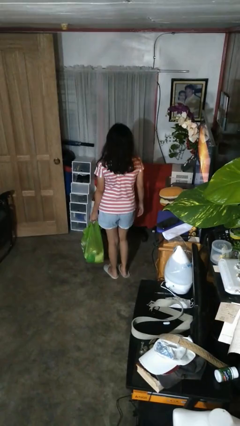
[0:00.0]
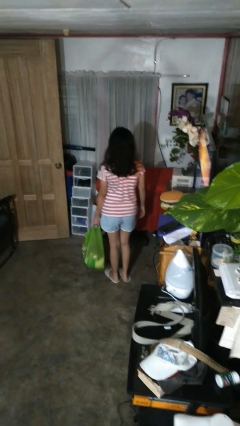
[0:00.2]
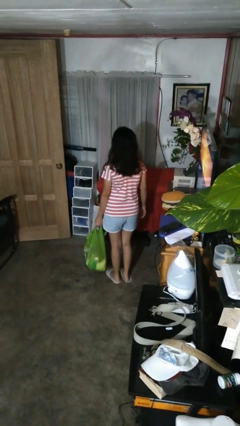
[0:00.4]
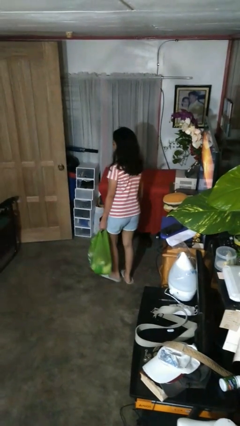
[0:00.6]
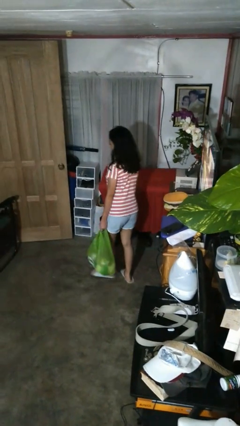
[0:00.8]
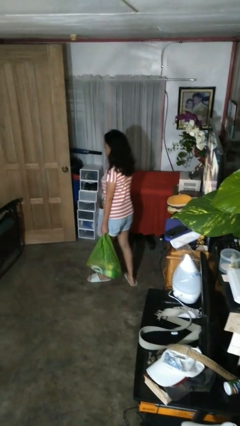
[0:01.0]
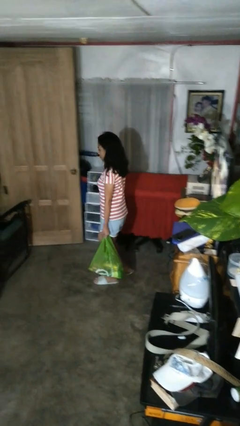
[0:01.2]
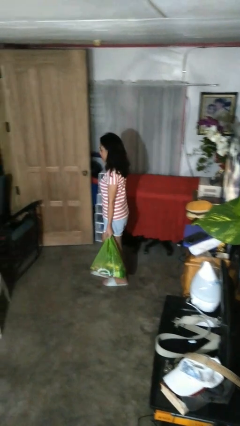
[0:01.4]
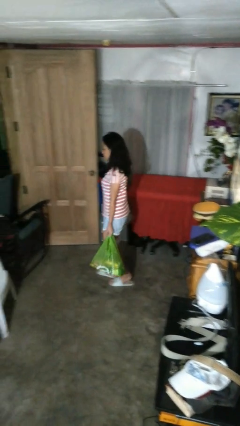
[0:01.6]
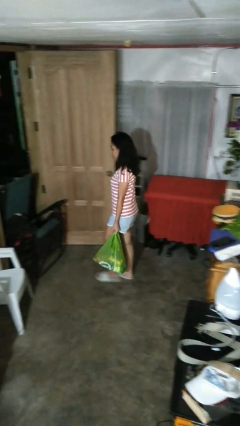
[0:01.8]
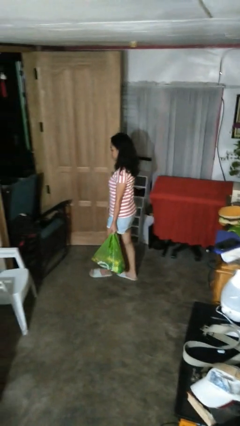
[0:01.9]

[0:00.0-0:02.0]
person carries groceries

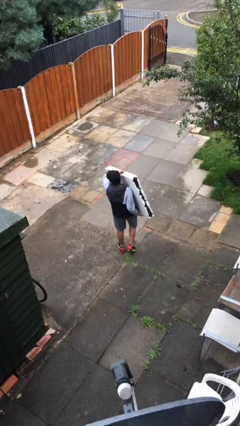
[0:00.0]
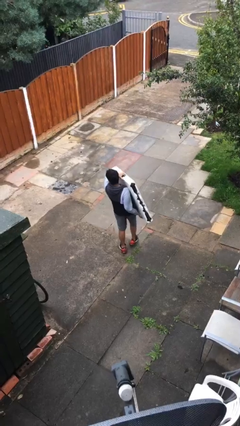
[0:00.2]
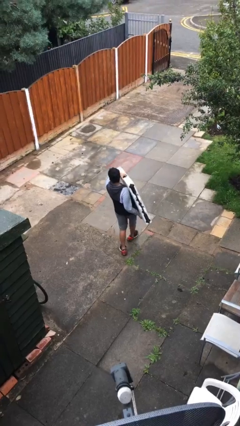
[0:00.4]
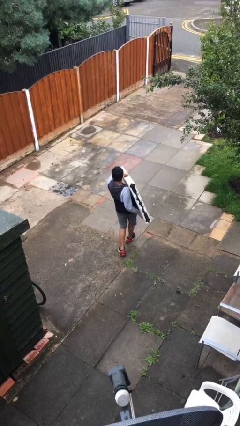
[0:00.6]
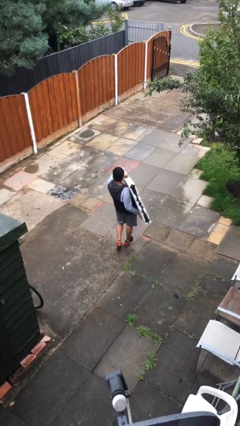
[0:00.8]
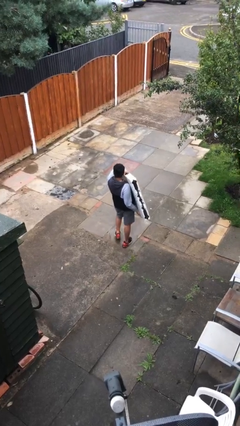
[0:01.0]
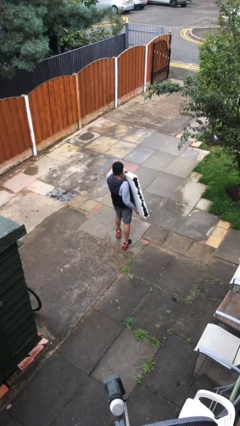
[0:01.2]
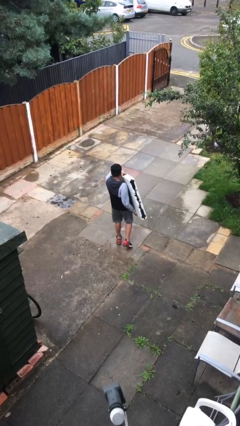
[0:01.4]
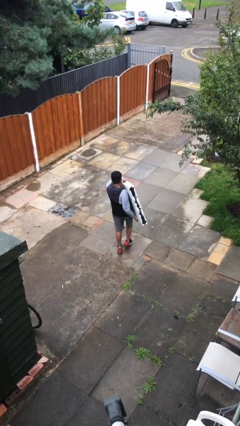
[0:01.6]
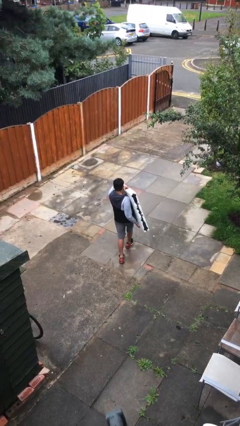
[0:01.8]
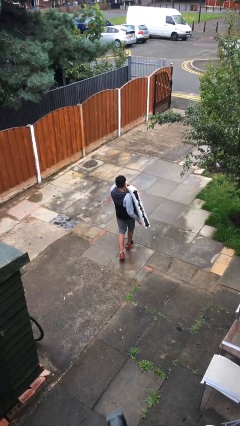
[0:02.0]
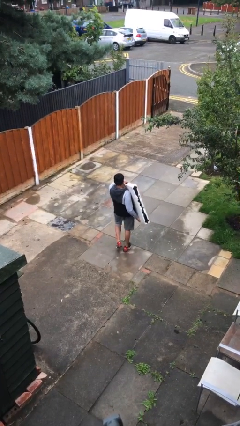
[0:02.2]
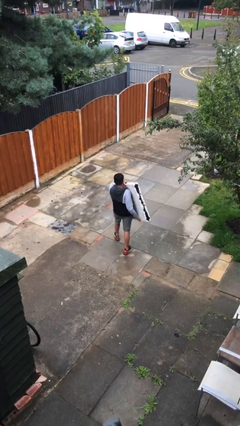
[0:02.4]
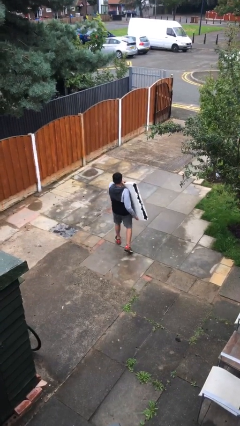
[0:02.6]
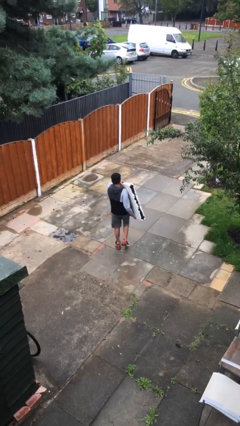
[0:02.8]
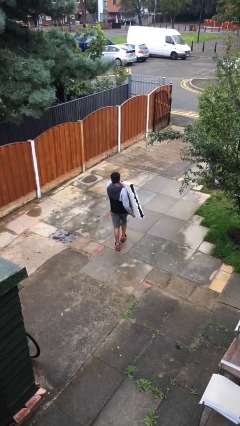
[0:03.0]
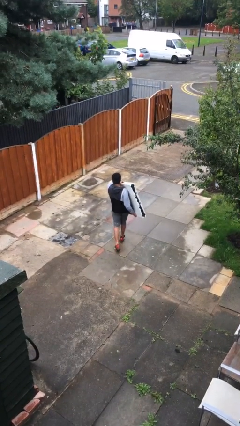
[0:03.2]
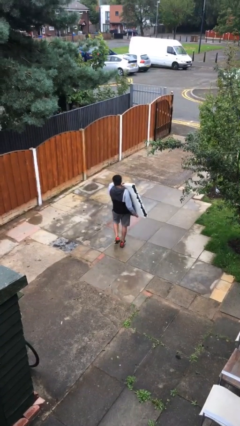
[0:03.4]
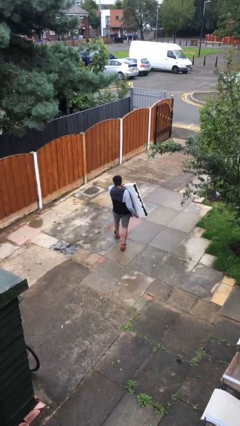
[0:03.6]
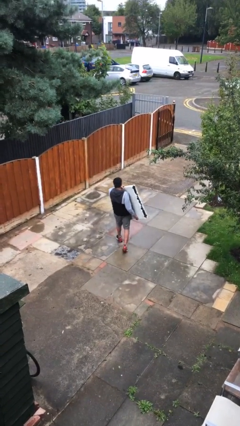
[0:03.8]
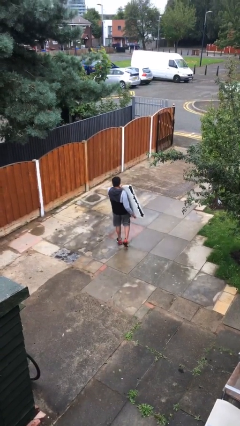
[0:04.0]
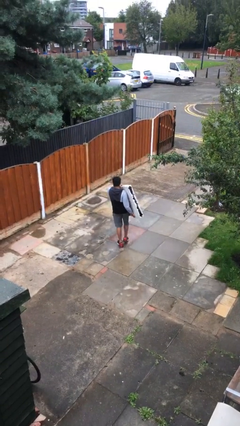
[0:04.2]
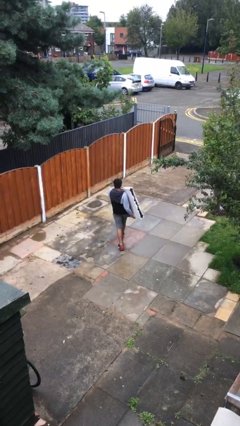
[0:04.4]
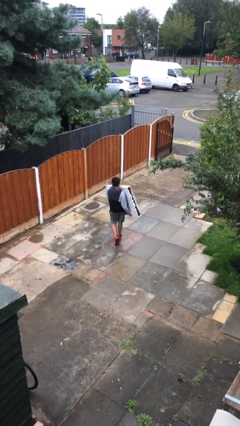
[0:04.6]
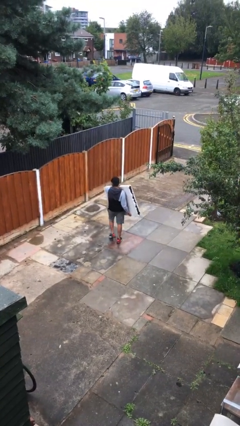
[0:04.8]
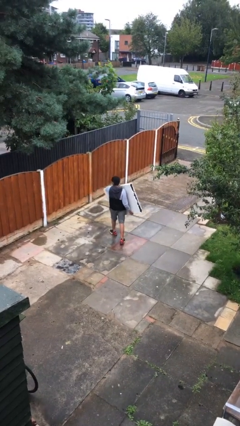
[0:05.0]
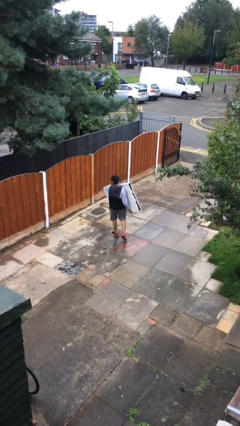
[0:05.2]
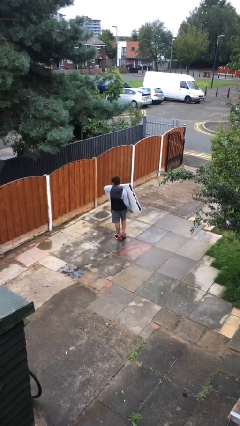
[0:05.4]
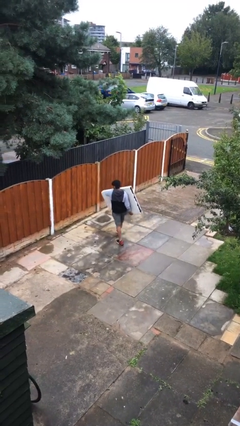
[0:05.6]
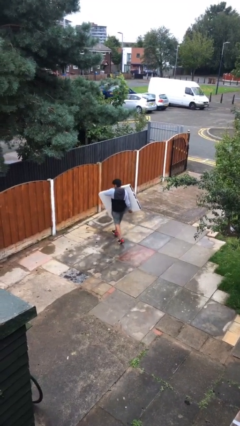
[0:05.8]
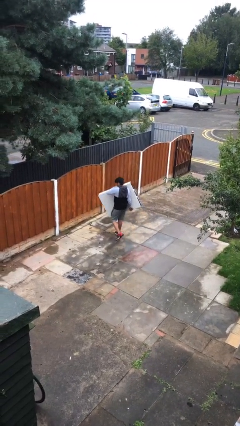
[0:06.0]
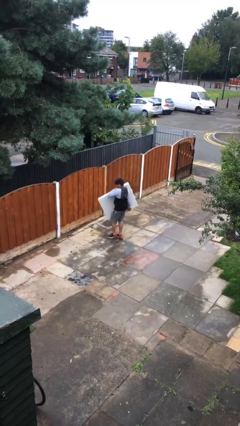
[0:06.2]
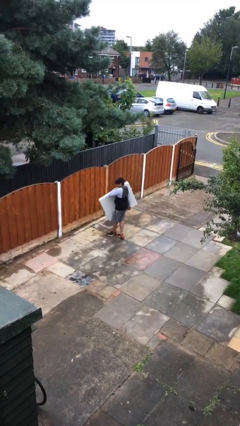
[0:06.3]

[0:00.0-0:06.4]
person carries heavy object

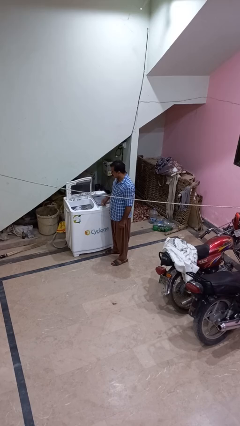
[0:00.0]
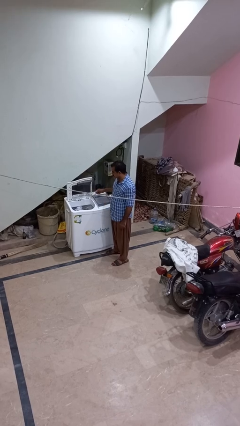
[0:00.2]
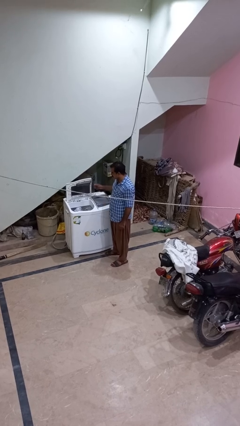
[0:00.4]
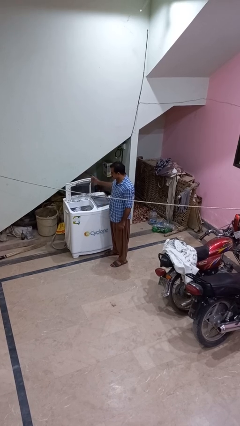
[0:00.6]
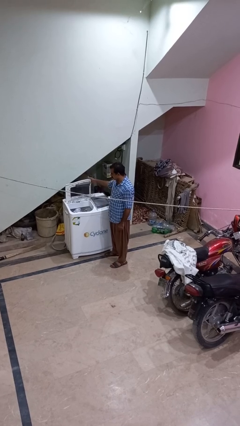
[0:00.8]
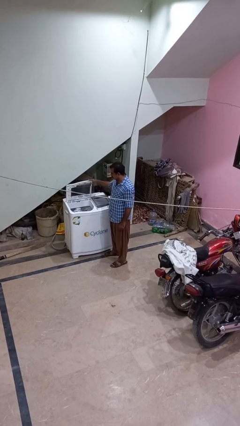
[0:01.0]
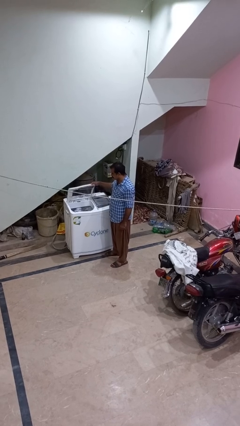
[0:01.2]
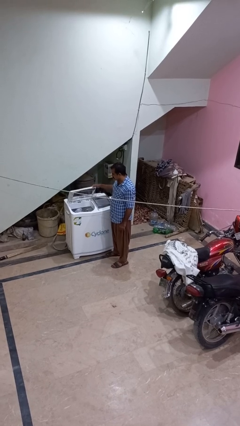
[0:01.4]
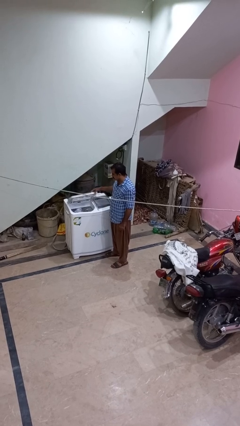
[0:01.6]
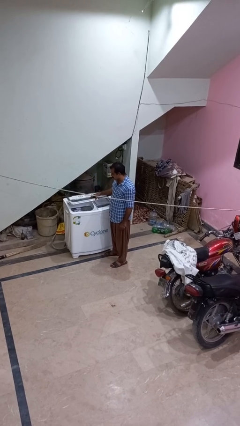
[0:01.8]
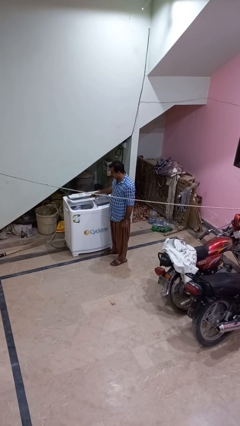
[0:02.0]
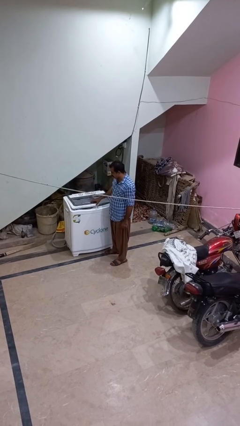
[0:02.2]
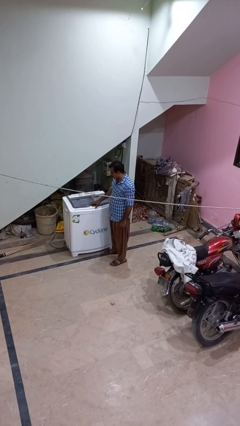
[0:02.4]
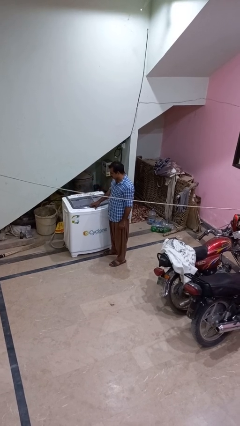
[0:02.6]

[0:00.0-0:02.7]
person closes clothes washer

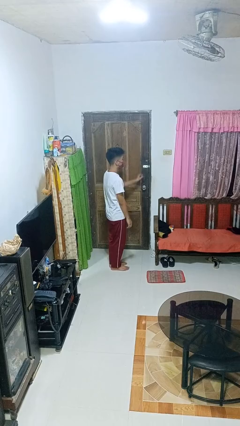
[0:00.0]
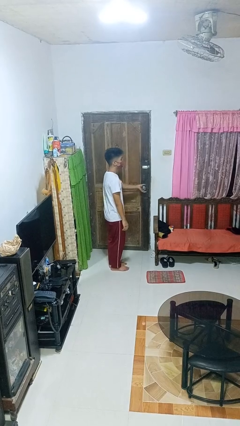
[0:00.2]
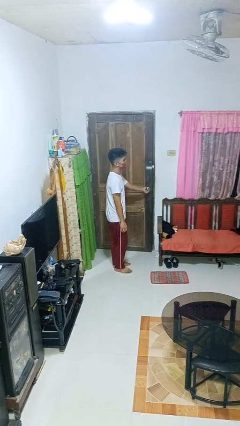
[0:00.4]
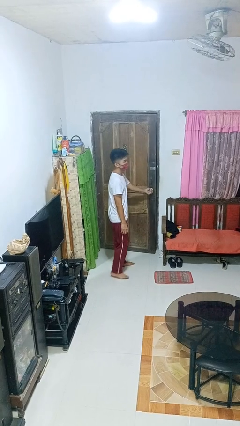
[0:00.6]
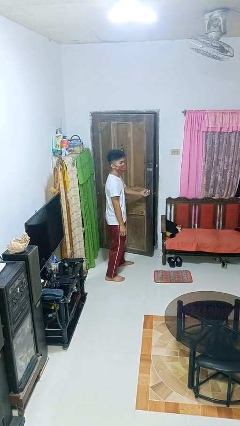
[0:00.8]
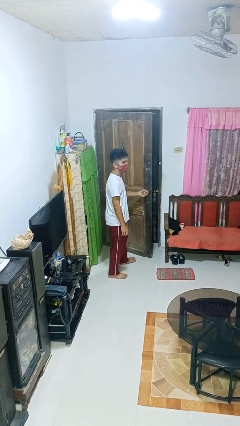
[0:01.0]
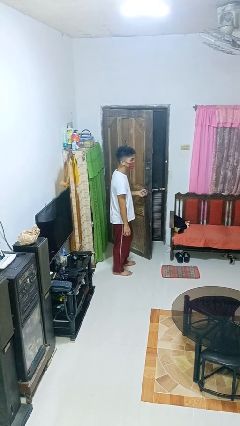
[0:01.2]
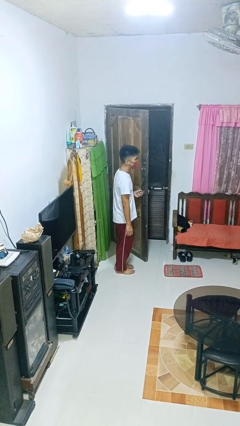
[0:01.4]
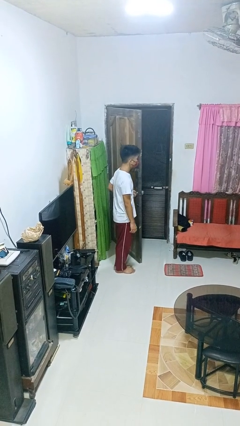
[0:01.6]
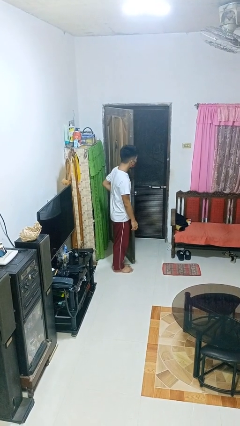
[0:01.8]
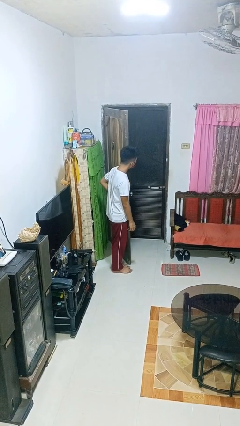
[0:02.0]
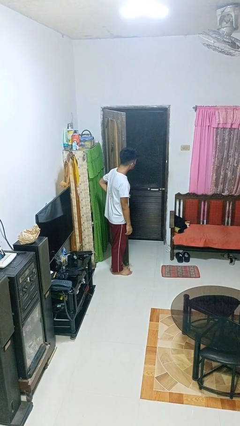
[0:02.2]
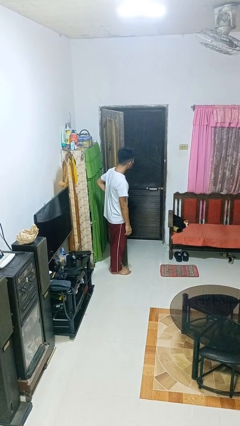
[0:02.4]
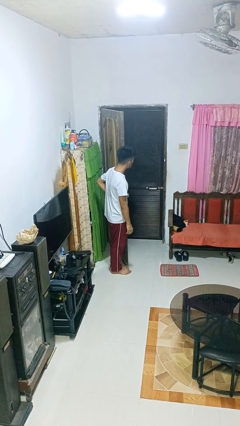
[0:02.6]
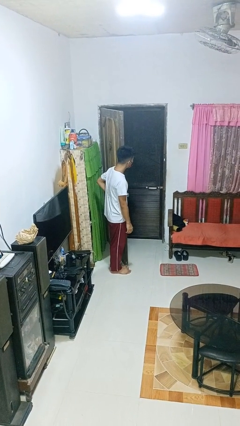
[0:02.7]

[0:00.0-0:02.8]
person opens facility door

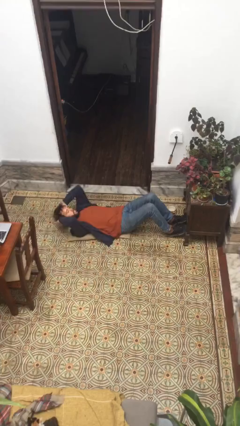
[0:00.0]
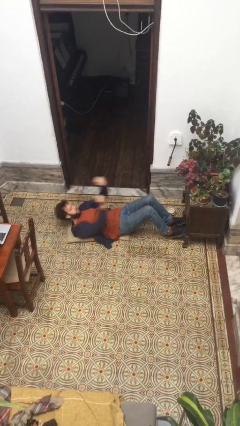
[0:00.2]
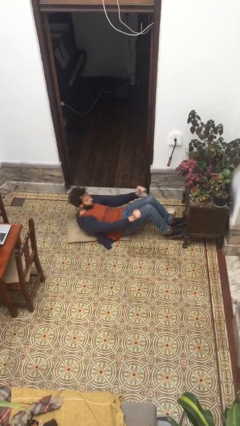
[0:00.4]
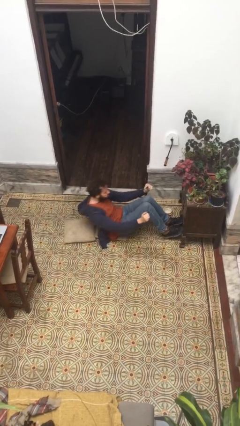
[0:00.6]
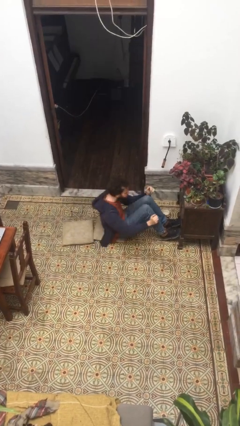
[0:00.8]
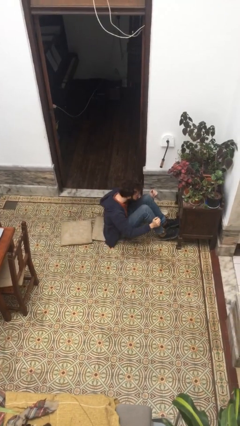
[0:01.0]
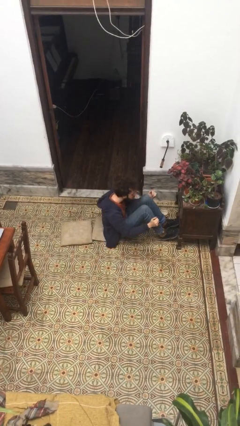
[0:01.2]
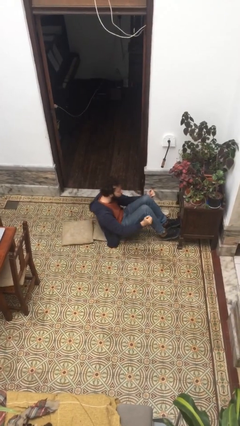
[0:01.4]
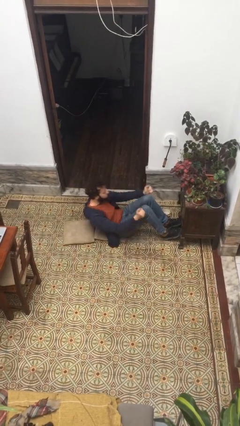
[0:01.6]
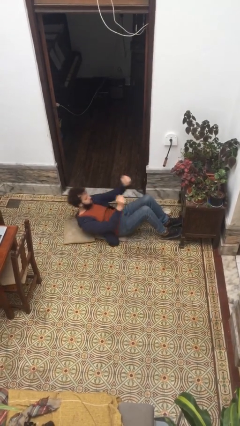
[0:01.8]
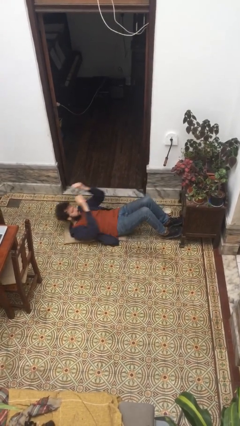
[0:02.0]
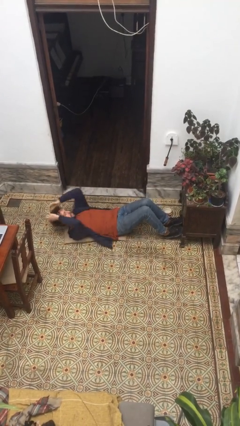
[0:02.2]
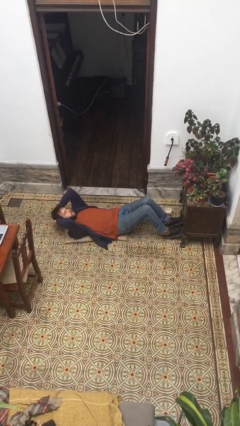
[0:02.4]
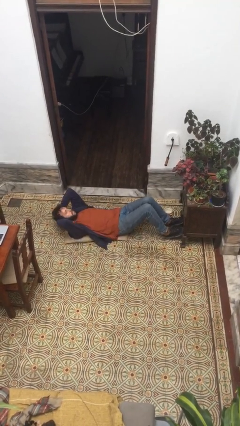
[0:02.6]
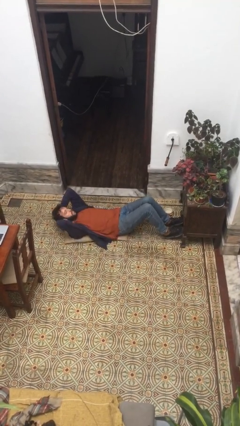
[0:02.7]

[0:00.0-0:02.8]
person exercises with situp

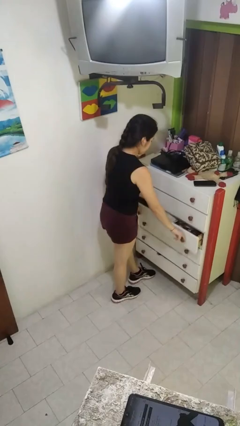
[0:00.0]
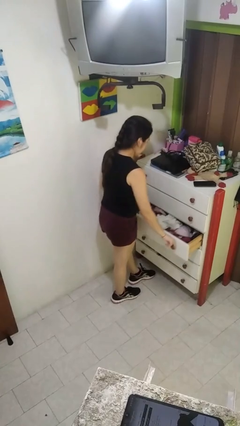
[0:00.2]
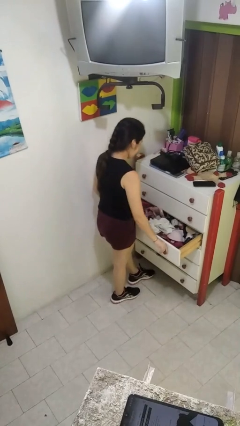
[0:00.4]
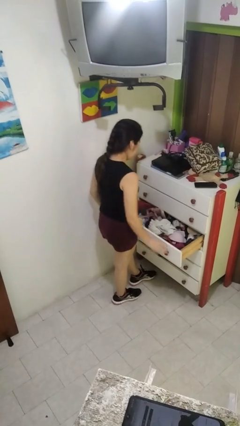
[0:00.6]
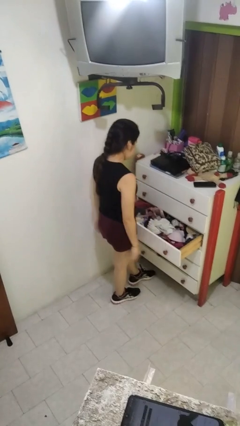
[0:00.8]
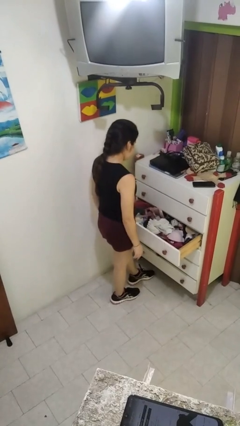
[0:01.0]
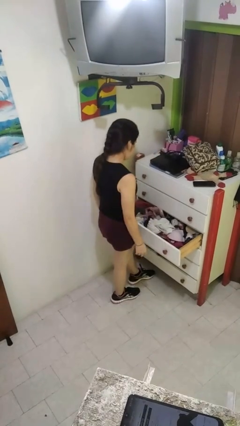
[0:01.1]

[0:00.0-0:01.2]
person opens dresser drawer
